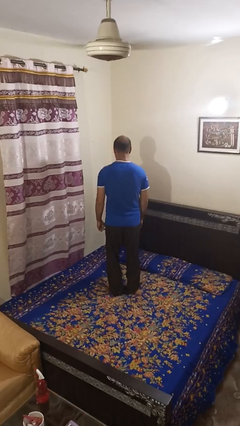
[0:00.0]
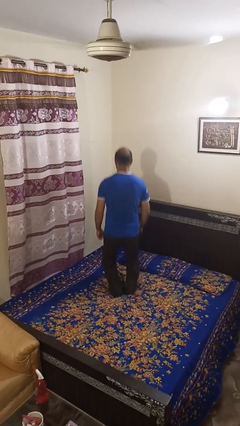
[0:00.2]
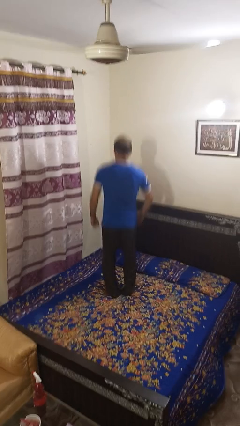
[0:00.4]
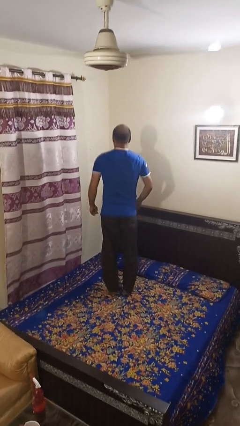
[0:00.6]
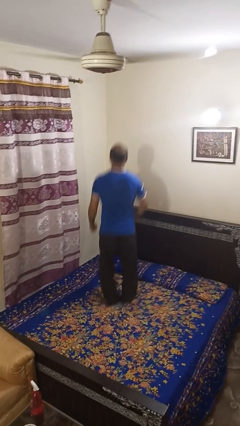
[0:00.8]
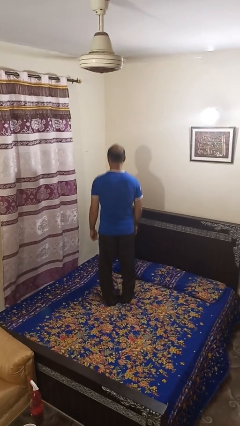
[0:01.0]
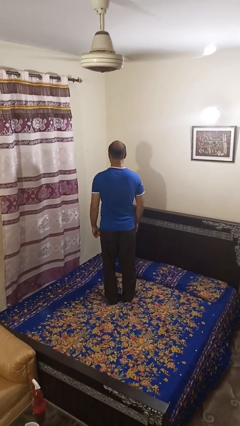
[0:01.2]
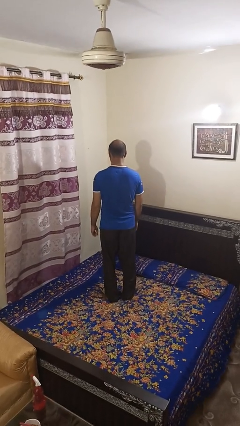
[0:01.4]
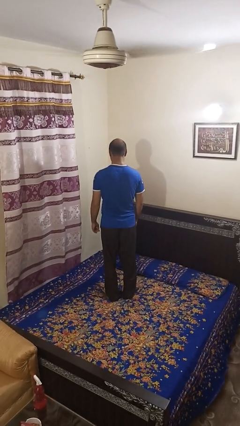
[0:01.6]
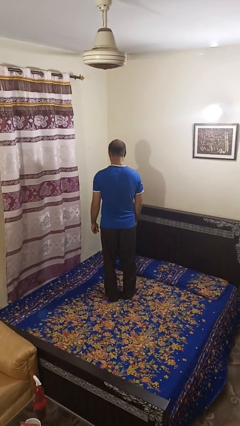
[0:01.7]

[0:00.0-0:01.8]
person jumps on bed

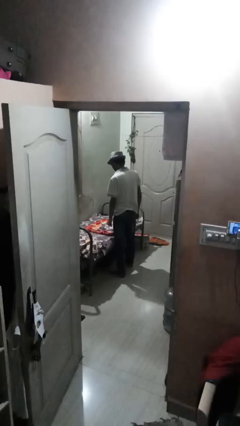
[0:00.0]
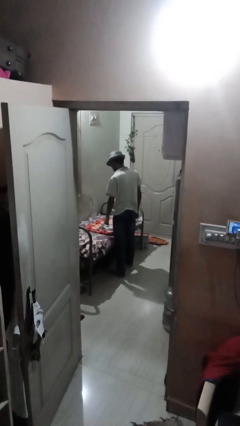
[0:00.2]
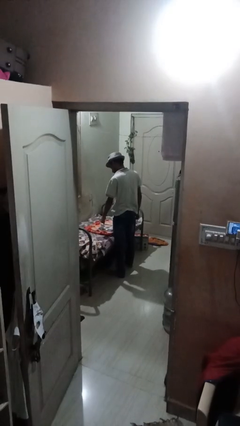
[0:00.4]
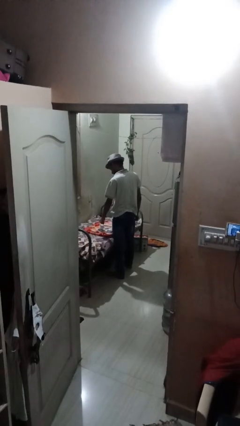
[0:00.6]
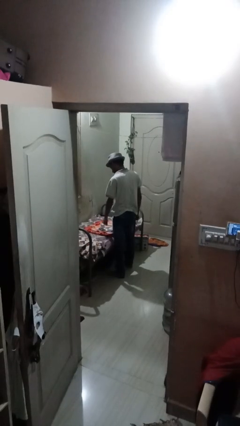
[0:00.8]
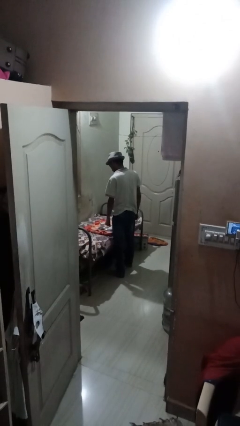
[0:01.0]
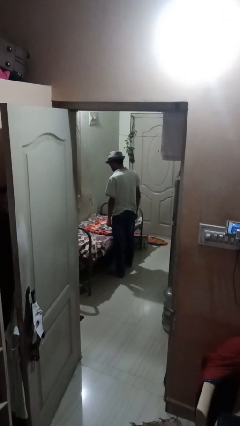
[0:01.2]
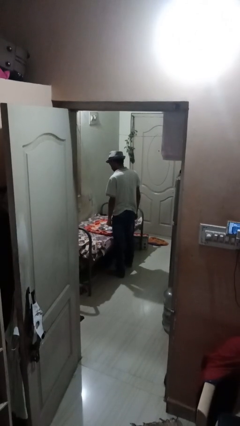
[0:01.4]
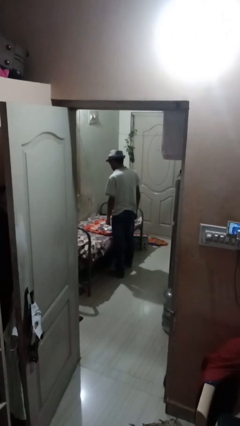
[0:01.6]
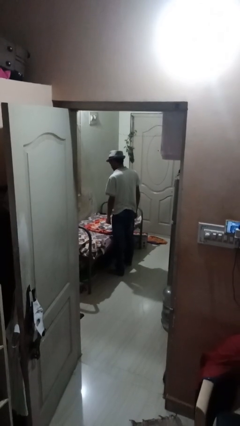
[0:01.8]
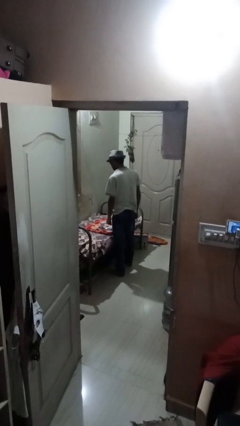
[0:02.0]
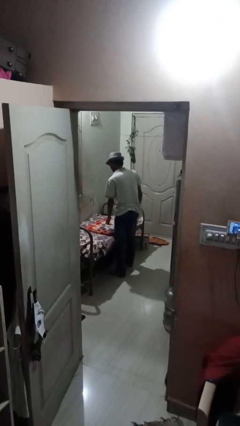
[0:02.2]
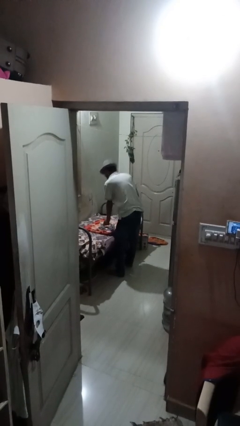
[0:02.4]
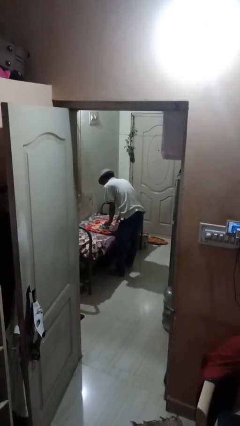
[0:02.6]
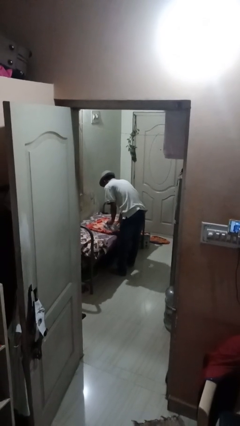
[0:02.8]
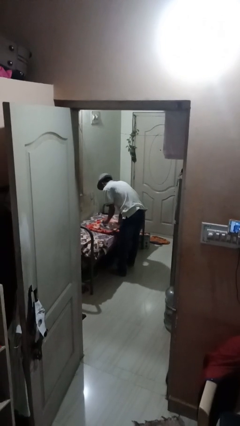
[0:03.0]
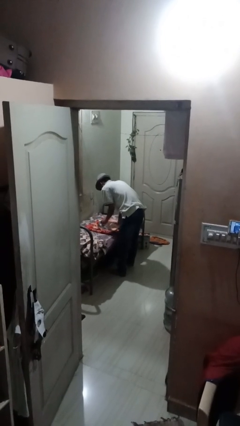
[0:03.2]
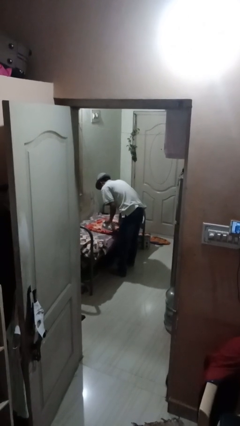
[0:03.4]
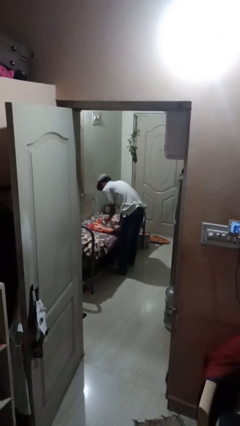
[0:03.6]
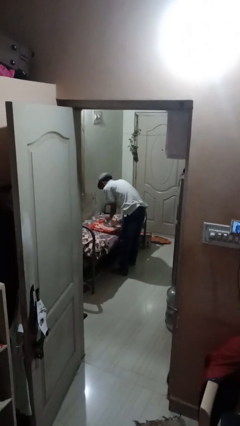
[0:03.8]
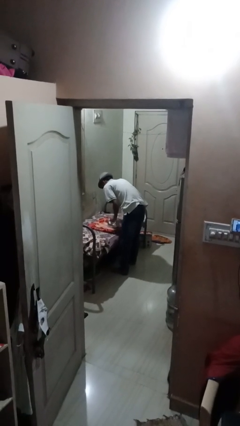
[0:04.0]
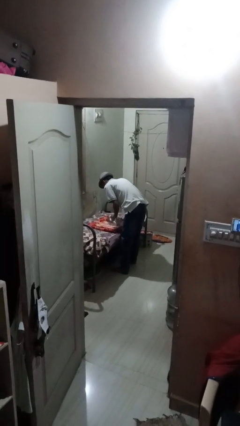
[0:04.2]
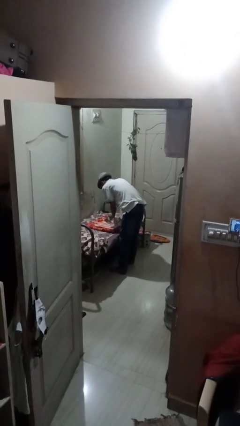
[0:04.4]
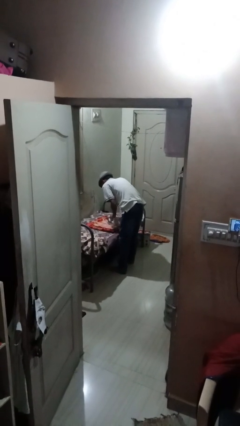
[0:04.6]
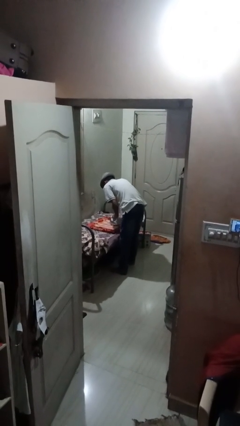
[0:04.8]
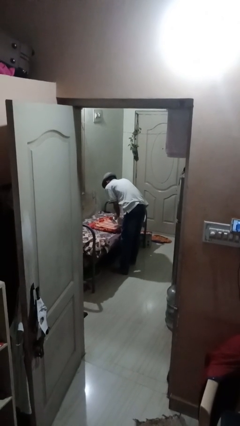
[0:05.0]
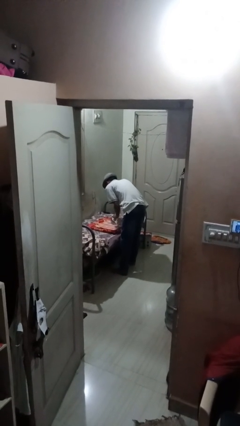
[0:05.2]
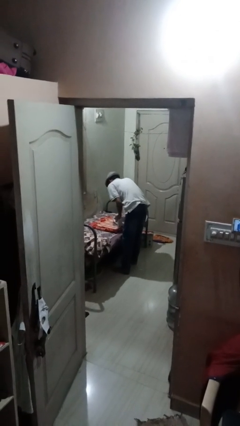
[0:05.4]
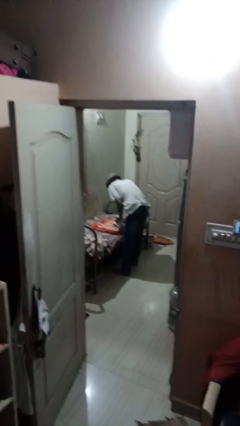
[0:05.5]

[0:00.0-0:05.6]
person irons clothes

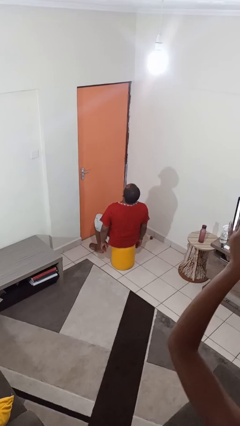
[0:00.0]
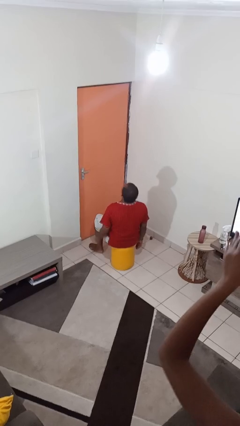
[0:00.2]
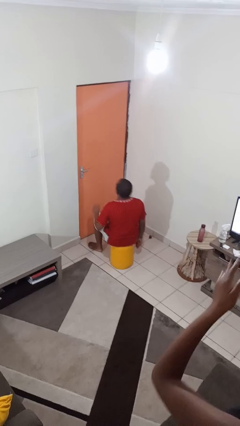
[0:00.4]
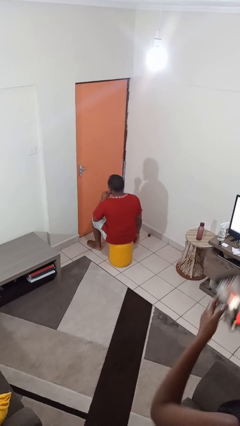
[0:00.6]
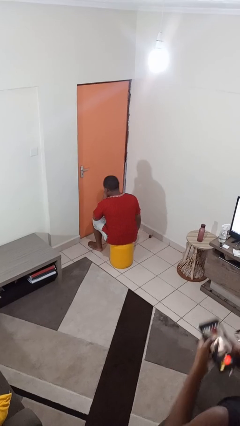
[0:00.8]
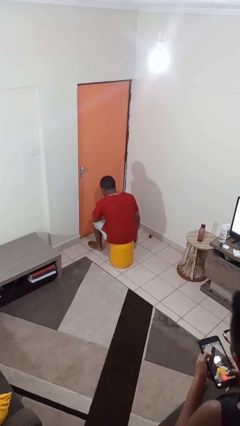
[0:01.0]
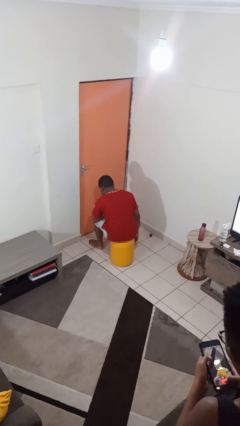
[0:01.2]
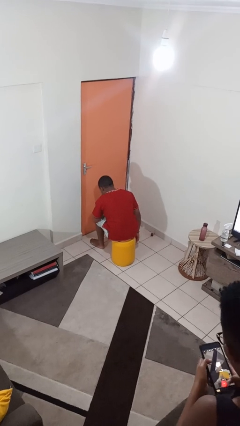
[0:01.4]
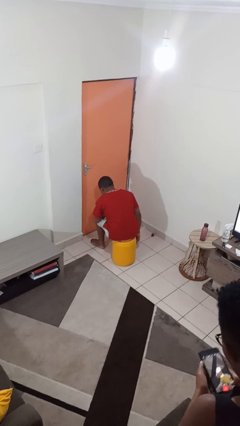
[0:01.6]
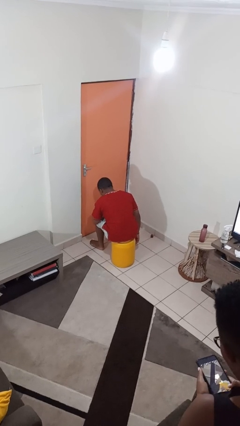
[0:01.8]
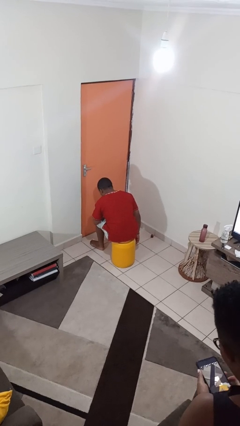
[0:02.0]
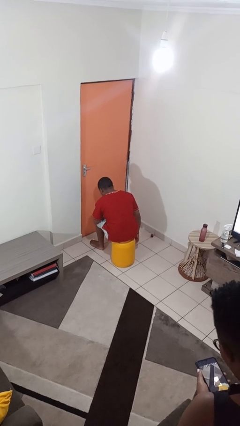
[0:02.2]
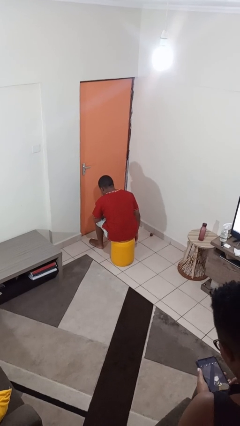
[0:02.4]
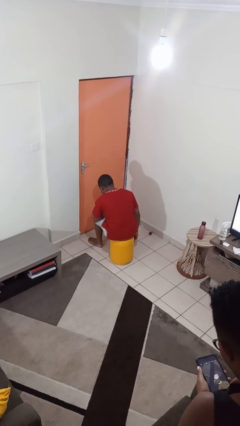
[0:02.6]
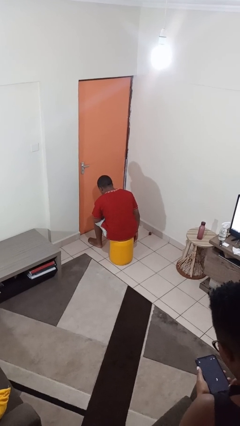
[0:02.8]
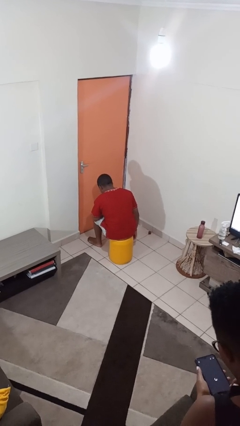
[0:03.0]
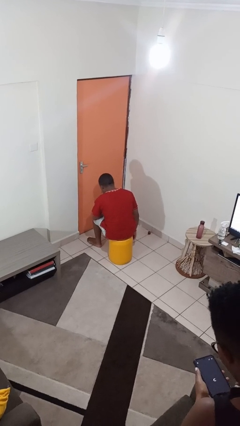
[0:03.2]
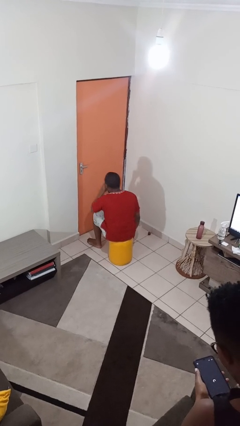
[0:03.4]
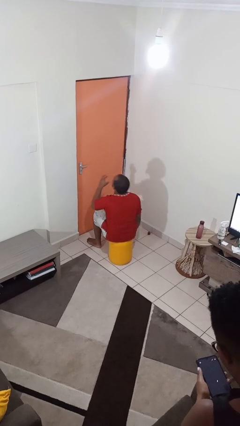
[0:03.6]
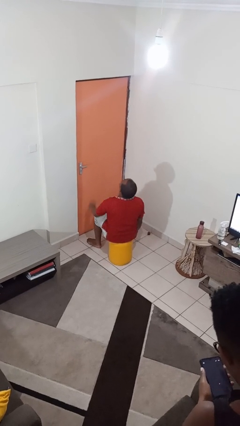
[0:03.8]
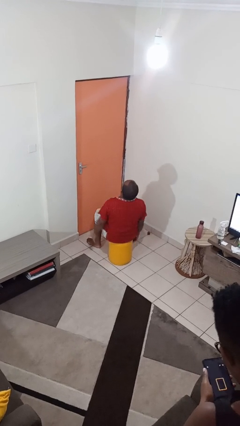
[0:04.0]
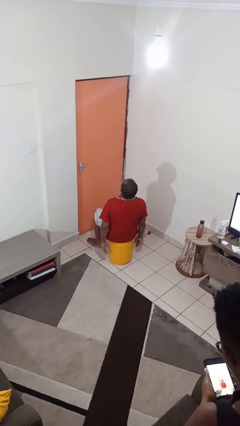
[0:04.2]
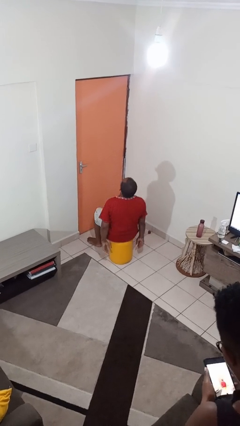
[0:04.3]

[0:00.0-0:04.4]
person yawns

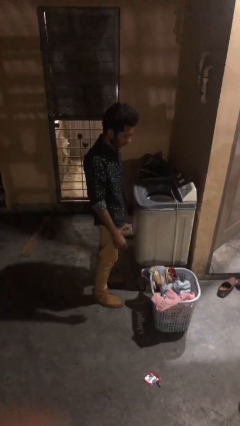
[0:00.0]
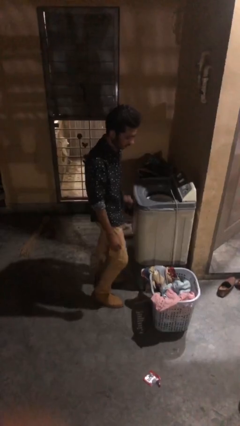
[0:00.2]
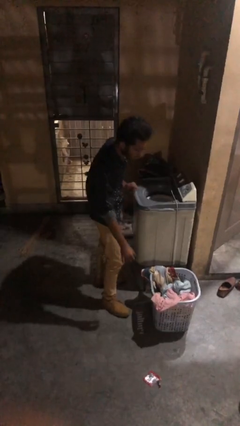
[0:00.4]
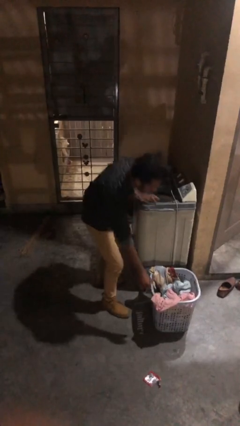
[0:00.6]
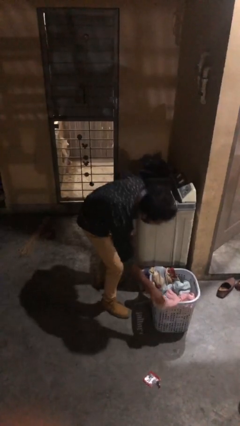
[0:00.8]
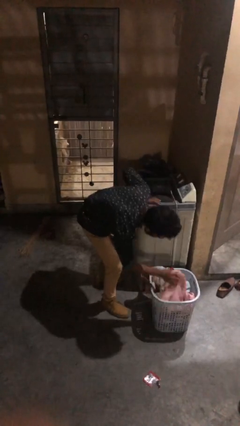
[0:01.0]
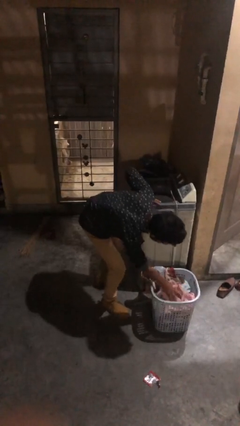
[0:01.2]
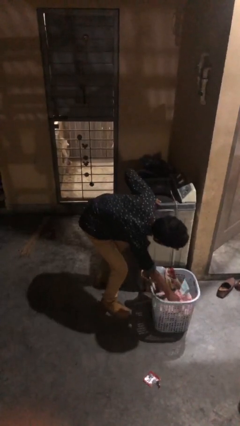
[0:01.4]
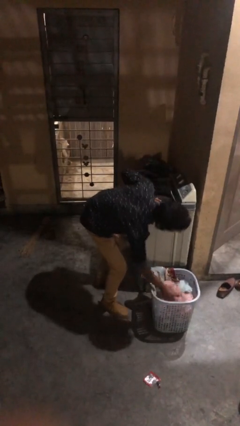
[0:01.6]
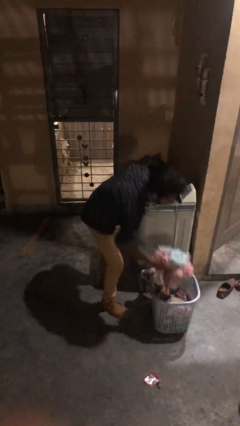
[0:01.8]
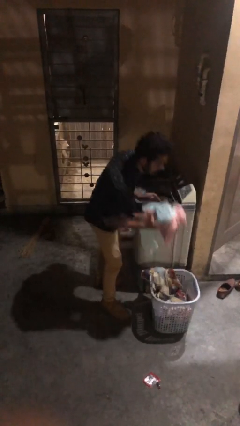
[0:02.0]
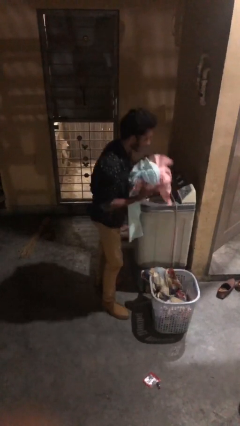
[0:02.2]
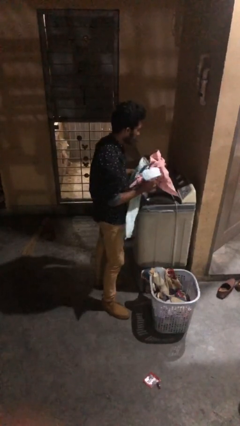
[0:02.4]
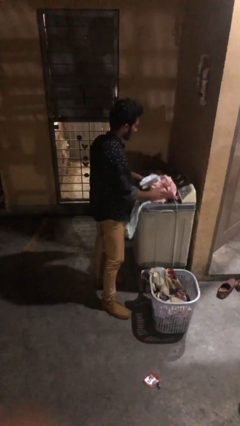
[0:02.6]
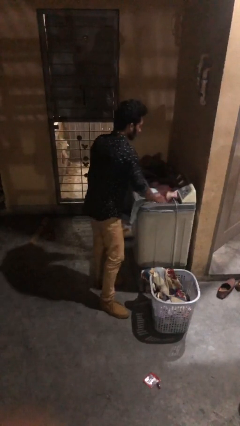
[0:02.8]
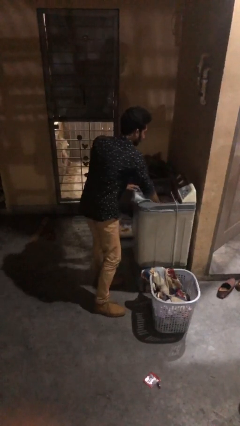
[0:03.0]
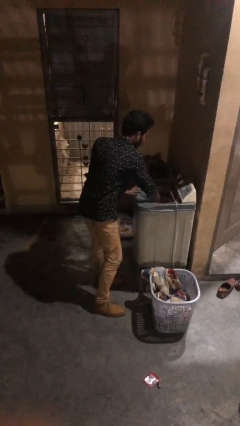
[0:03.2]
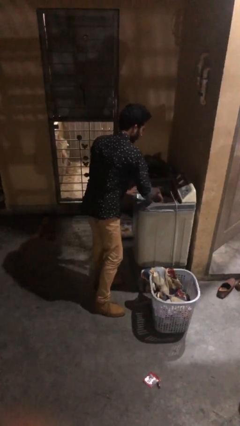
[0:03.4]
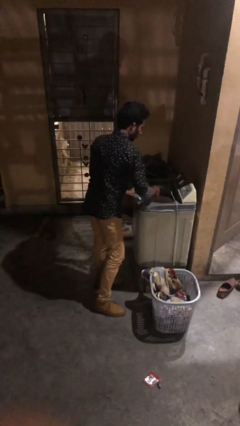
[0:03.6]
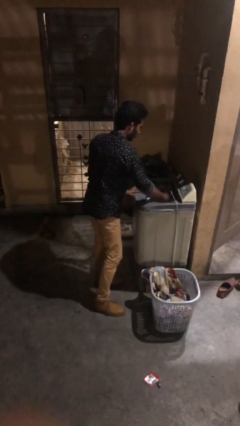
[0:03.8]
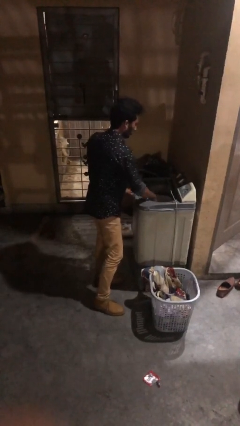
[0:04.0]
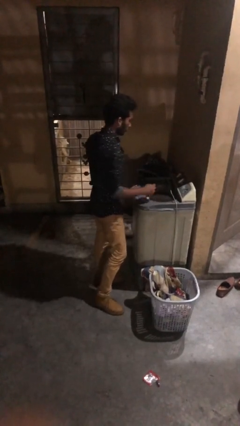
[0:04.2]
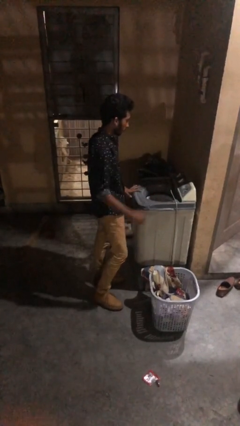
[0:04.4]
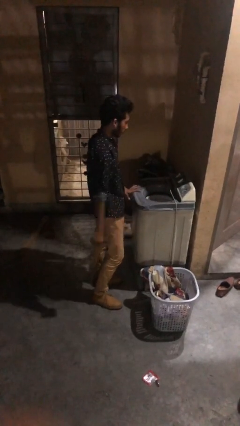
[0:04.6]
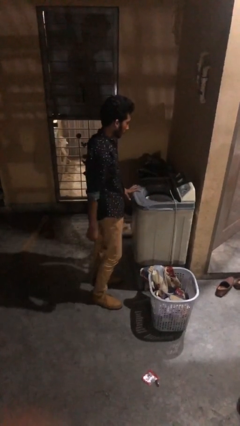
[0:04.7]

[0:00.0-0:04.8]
person loads clotheswasher

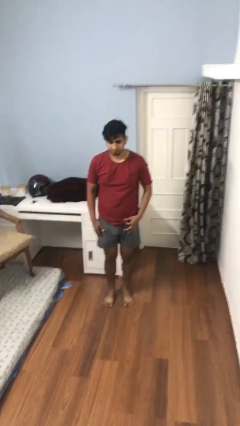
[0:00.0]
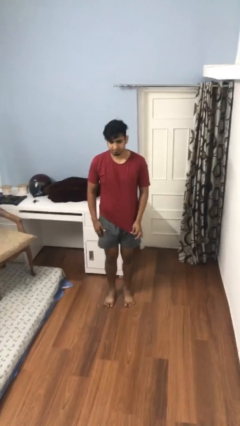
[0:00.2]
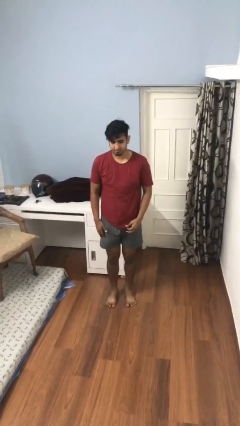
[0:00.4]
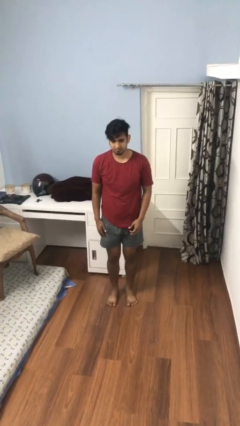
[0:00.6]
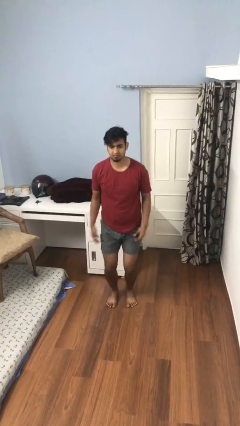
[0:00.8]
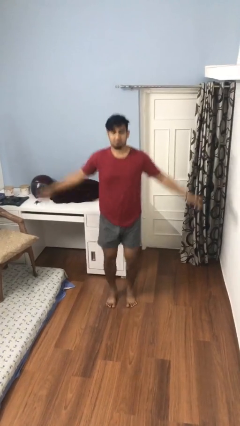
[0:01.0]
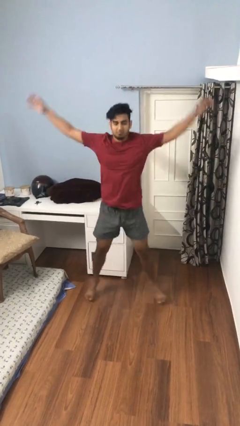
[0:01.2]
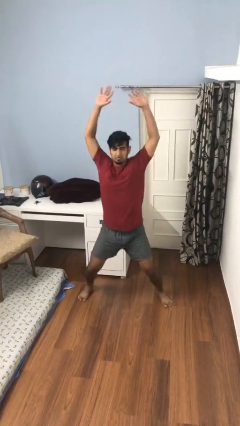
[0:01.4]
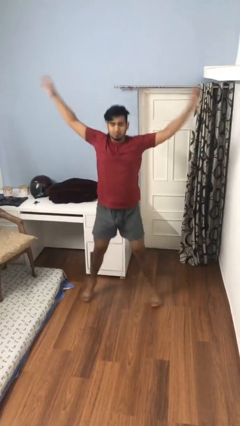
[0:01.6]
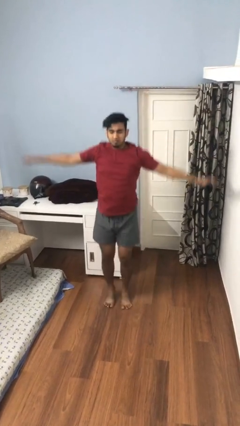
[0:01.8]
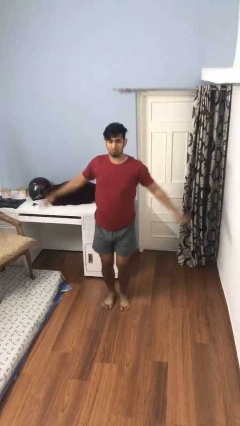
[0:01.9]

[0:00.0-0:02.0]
person exercises with jumping jacks
